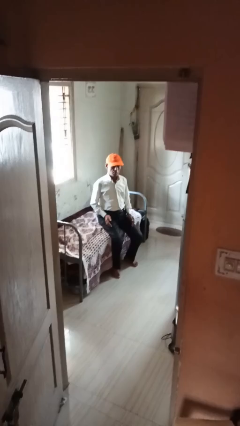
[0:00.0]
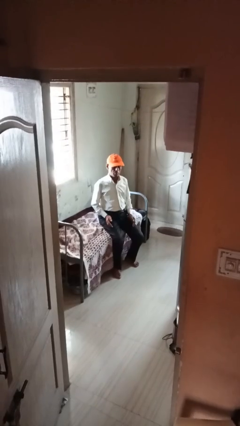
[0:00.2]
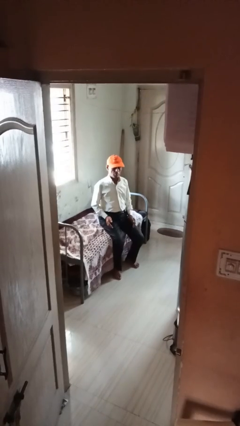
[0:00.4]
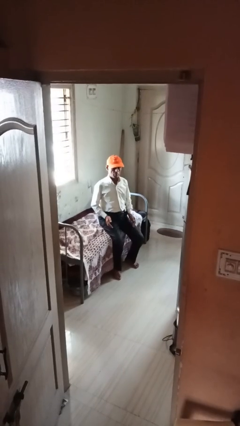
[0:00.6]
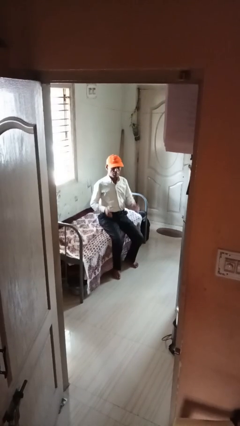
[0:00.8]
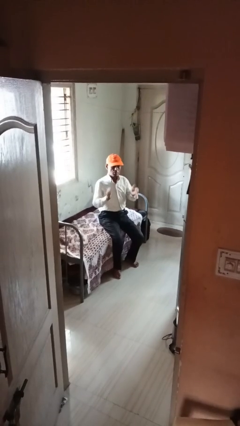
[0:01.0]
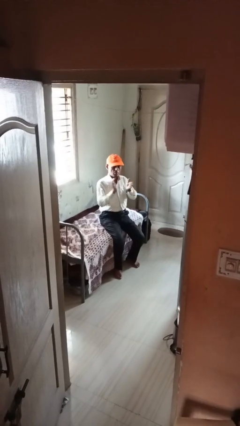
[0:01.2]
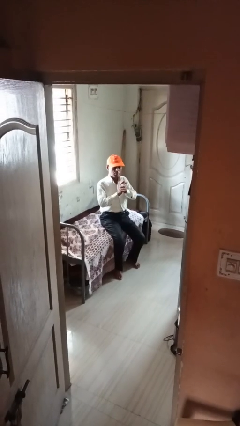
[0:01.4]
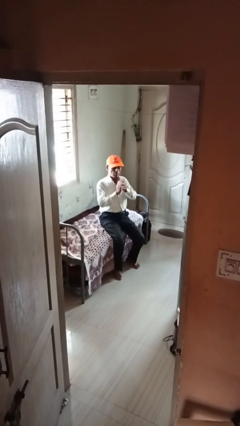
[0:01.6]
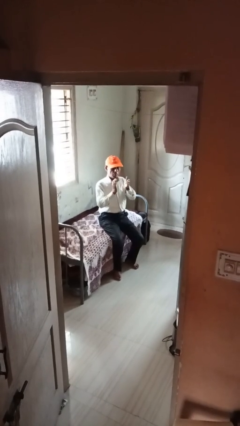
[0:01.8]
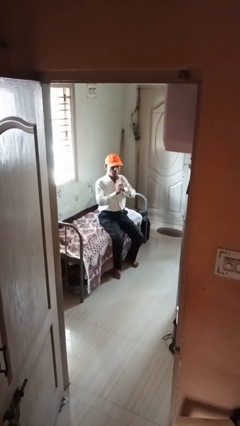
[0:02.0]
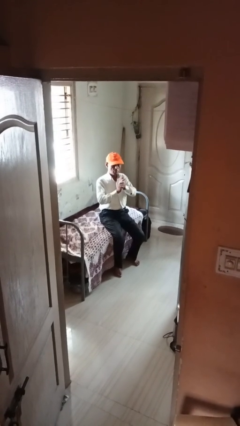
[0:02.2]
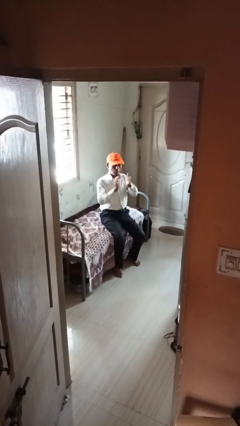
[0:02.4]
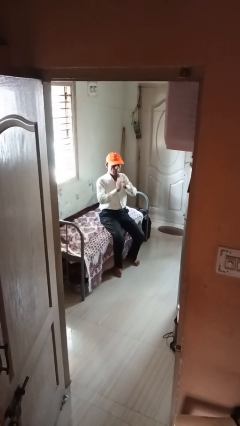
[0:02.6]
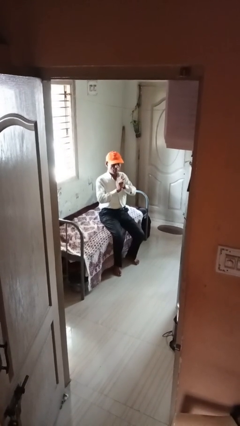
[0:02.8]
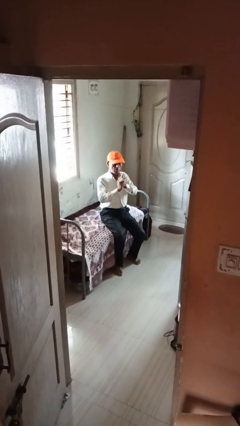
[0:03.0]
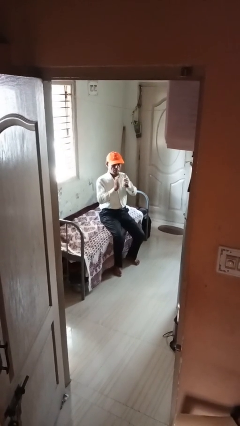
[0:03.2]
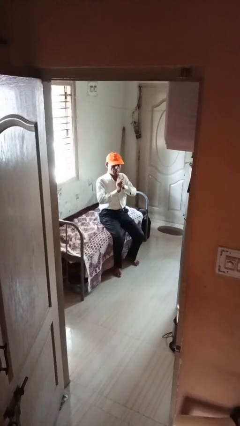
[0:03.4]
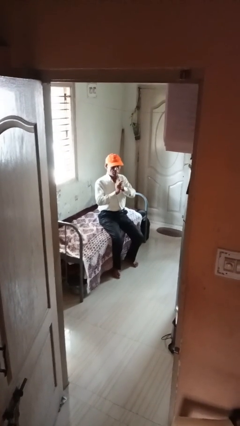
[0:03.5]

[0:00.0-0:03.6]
person claps hands

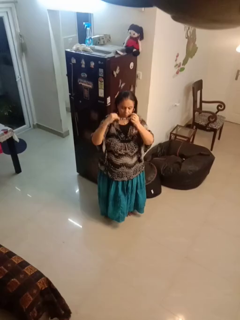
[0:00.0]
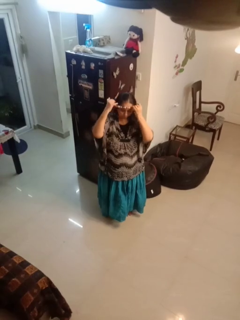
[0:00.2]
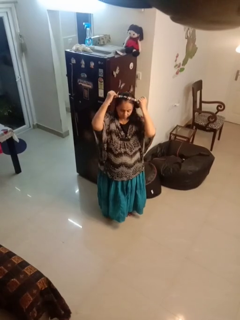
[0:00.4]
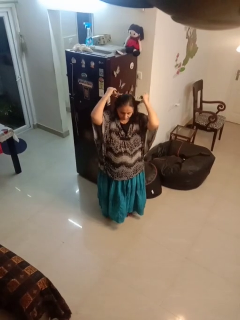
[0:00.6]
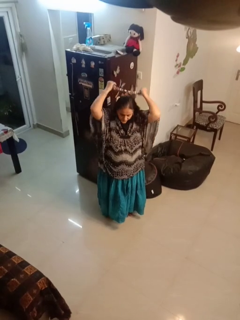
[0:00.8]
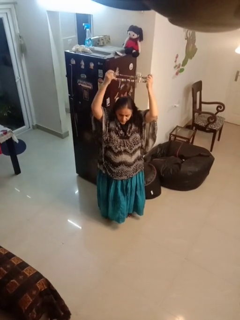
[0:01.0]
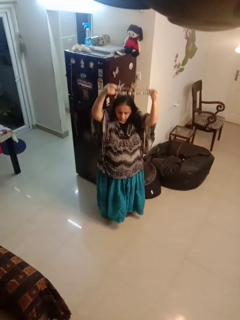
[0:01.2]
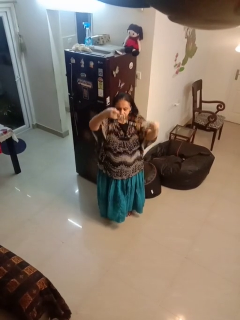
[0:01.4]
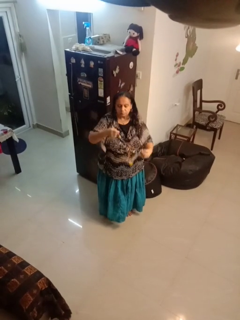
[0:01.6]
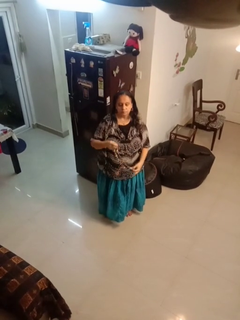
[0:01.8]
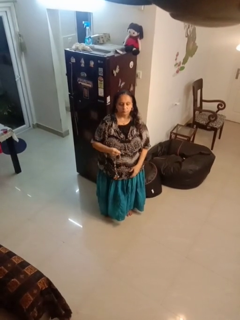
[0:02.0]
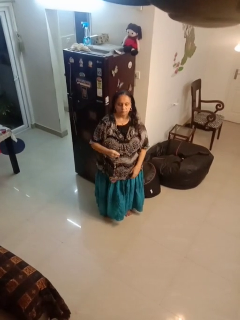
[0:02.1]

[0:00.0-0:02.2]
person takes off necklace

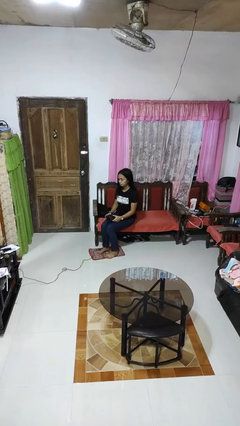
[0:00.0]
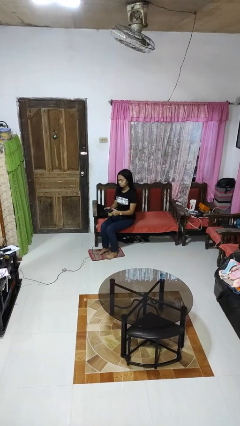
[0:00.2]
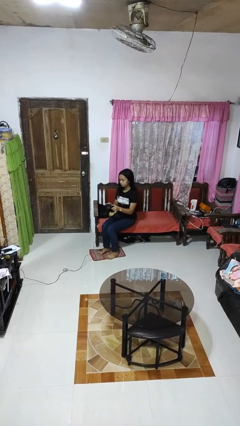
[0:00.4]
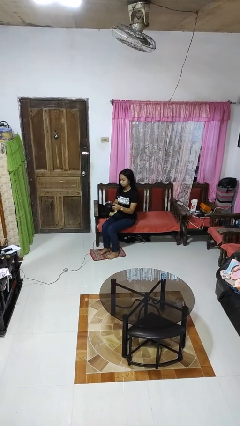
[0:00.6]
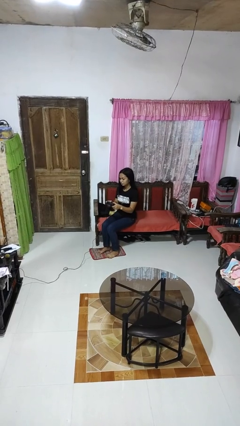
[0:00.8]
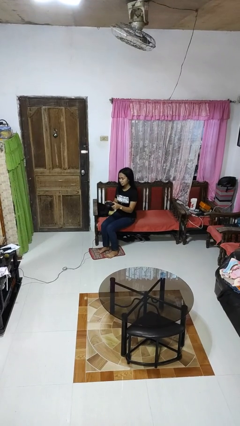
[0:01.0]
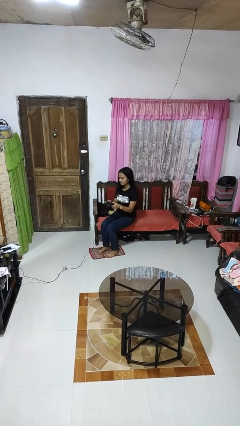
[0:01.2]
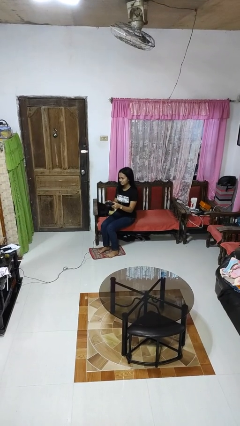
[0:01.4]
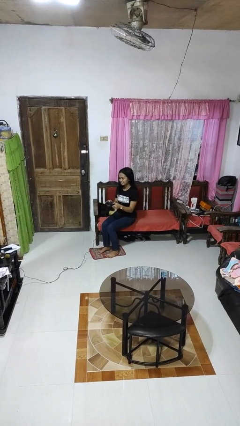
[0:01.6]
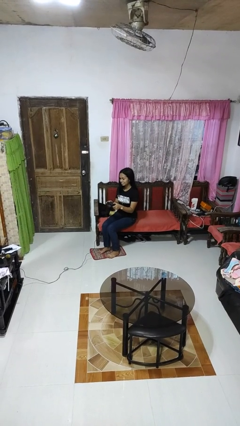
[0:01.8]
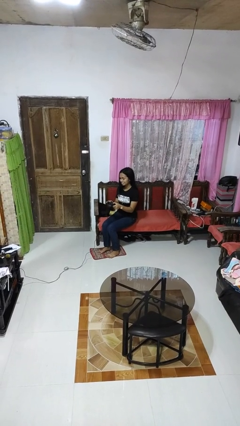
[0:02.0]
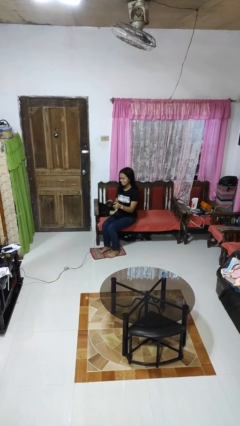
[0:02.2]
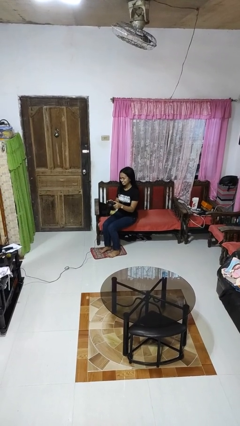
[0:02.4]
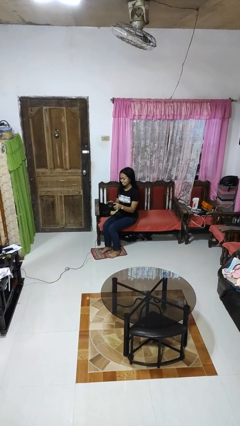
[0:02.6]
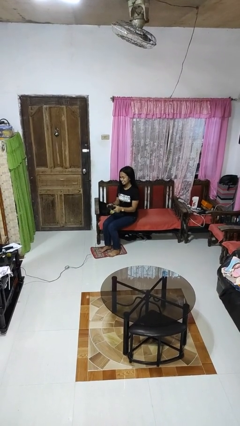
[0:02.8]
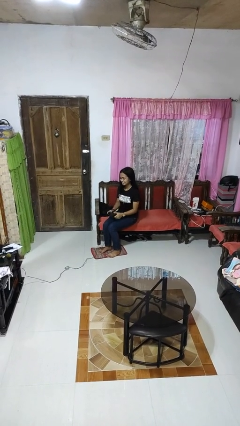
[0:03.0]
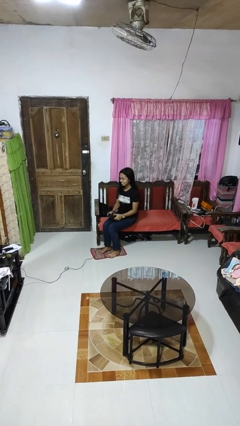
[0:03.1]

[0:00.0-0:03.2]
person interacts with handheld game
